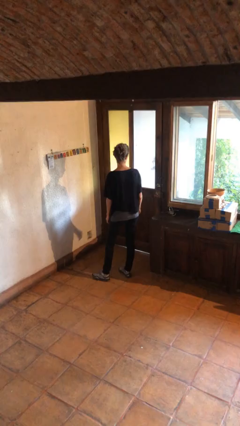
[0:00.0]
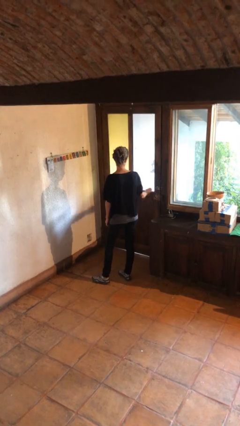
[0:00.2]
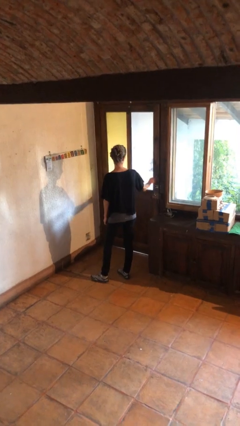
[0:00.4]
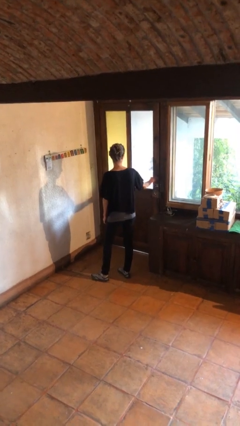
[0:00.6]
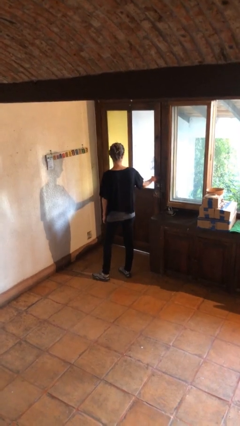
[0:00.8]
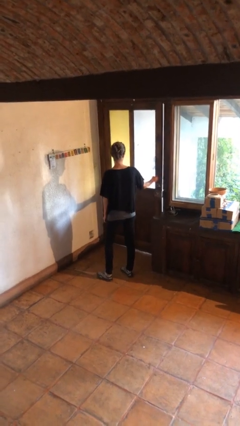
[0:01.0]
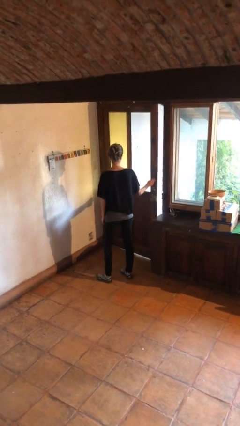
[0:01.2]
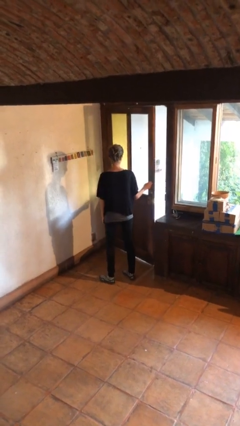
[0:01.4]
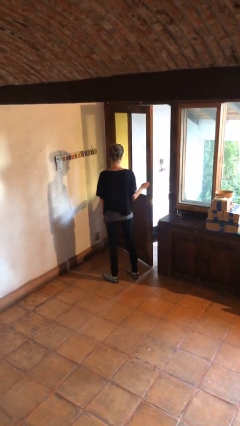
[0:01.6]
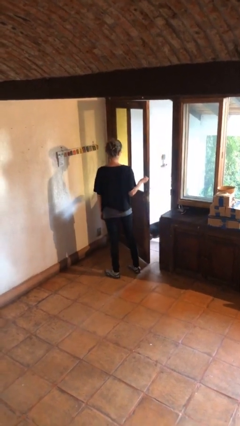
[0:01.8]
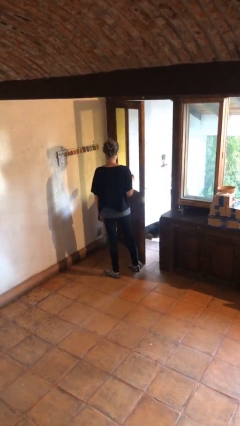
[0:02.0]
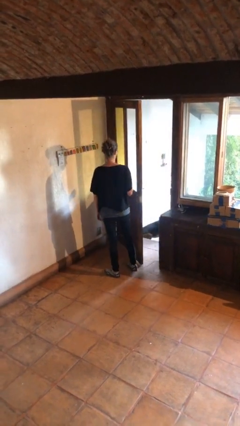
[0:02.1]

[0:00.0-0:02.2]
person opens facility door

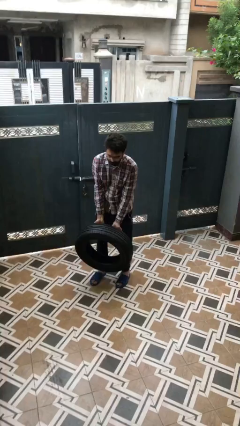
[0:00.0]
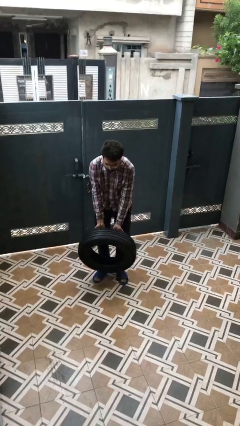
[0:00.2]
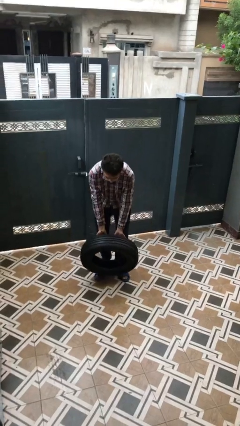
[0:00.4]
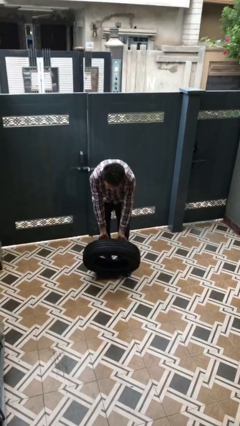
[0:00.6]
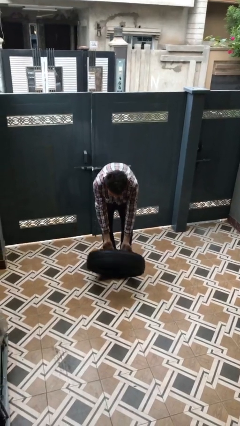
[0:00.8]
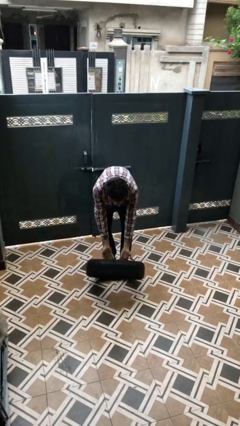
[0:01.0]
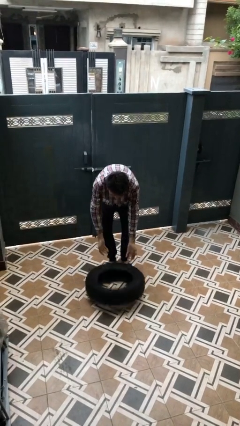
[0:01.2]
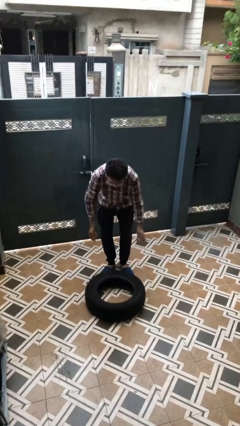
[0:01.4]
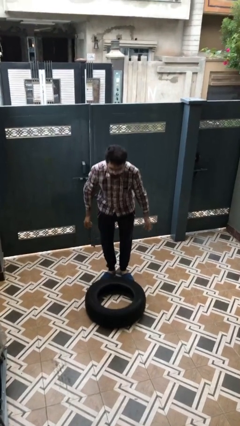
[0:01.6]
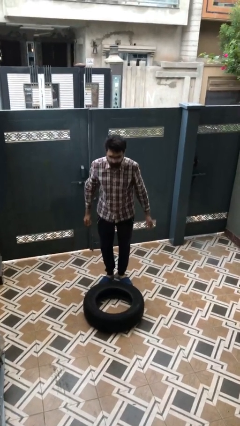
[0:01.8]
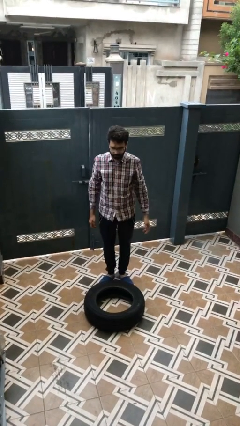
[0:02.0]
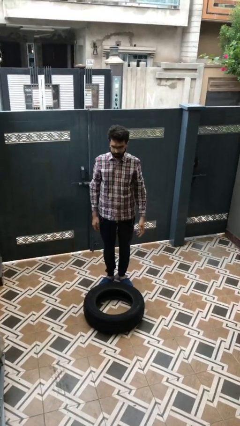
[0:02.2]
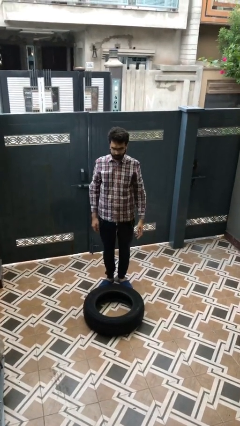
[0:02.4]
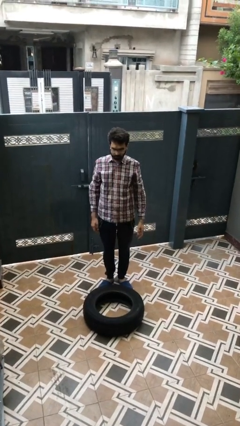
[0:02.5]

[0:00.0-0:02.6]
person puts down object on floor

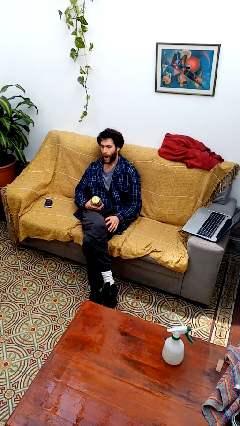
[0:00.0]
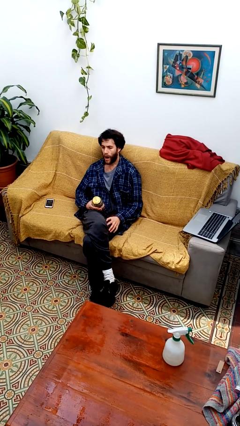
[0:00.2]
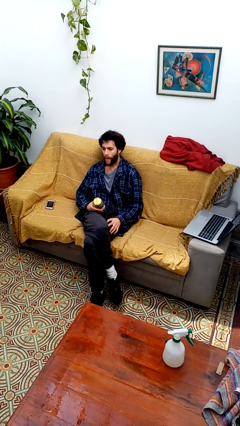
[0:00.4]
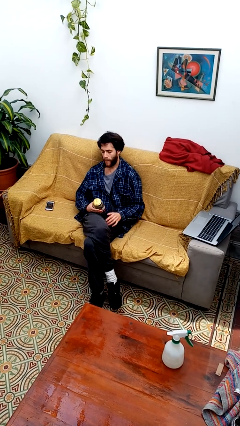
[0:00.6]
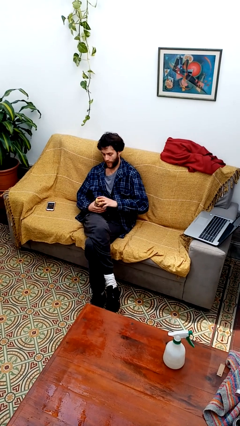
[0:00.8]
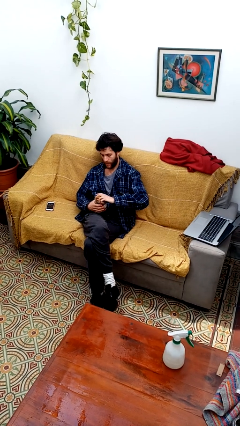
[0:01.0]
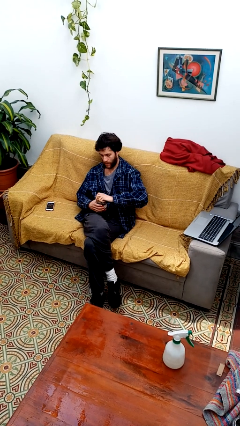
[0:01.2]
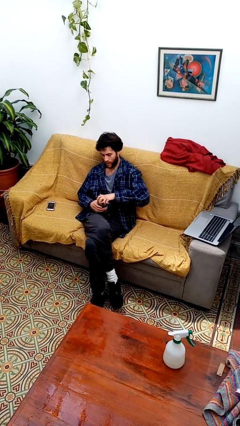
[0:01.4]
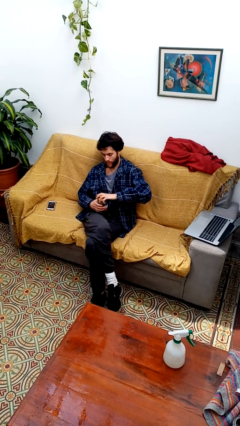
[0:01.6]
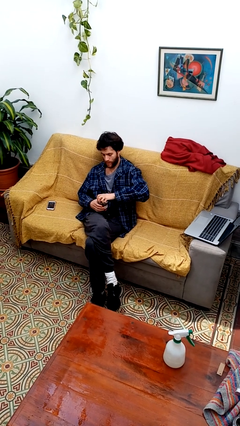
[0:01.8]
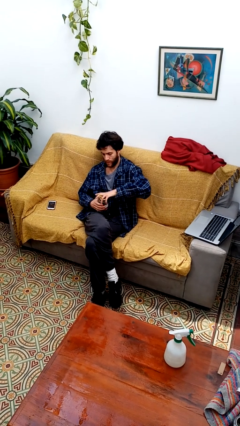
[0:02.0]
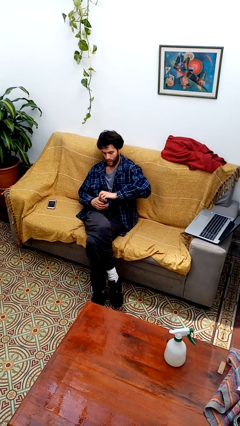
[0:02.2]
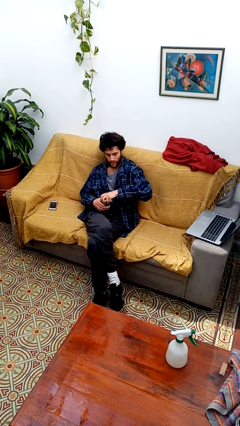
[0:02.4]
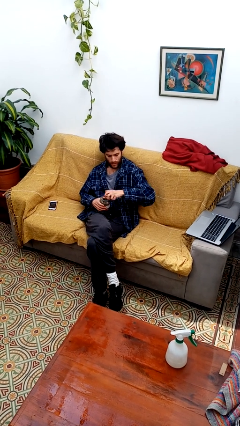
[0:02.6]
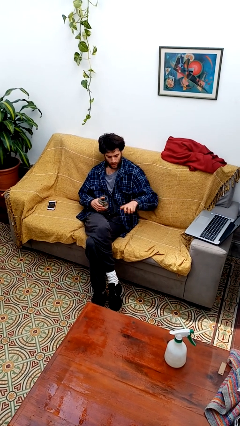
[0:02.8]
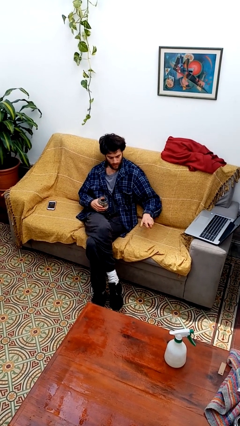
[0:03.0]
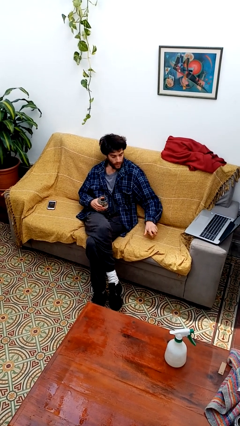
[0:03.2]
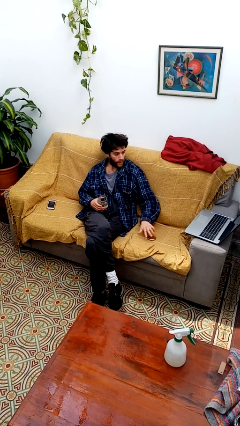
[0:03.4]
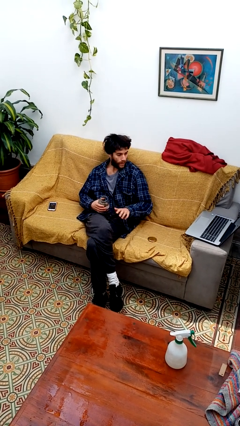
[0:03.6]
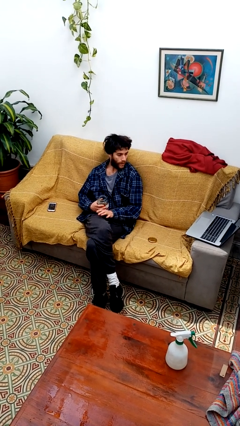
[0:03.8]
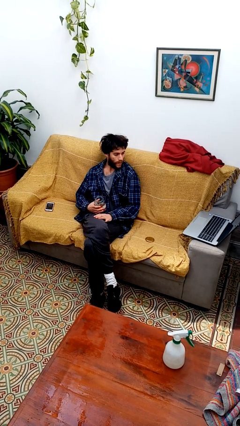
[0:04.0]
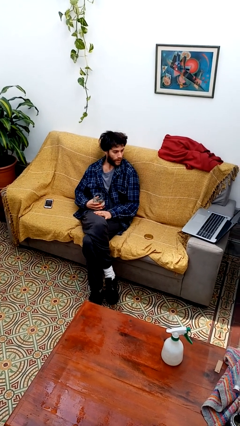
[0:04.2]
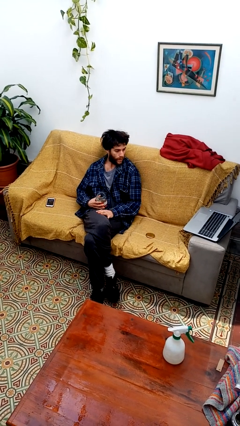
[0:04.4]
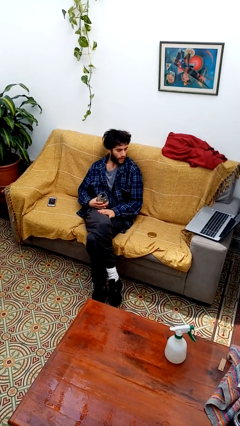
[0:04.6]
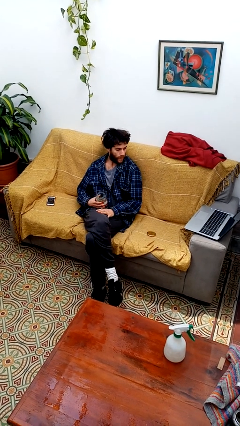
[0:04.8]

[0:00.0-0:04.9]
person opens jar

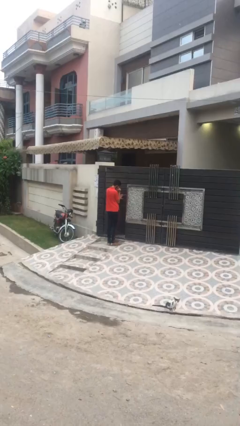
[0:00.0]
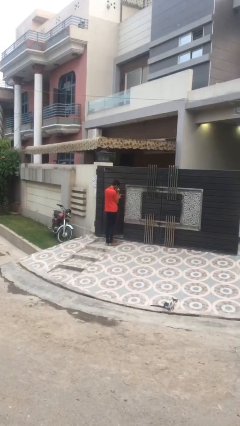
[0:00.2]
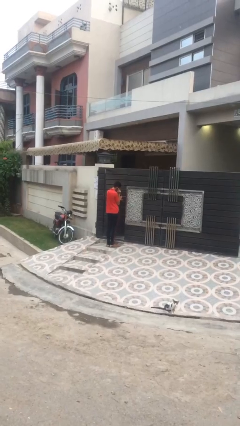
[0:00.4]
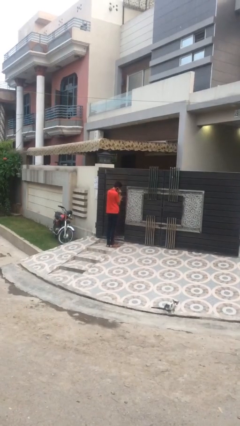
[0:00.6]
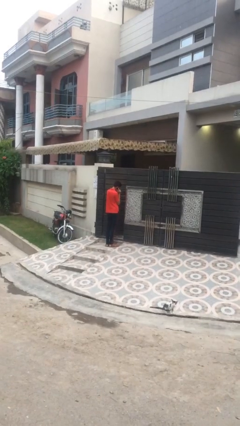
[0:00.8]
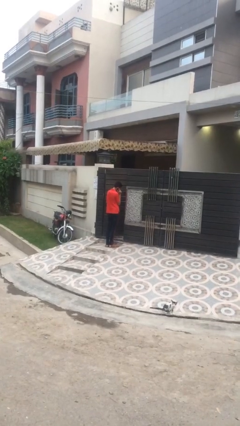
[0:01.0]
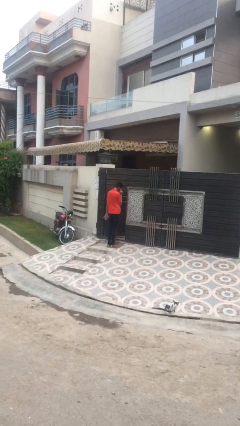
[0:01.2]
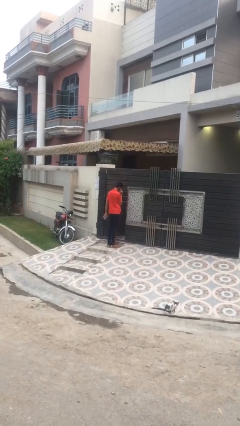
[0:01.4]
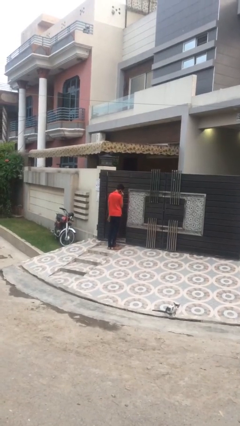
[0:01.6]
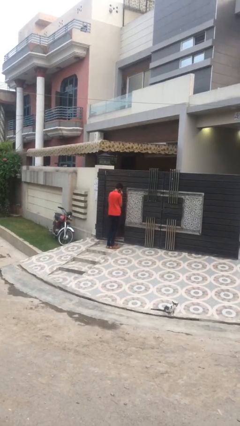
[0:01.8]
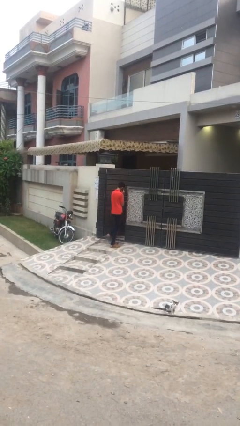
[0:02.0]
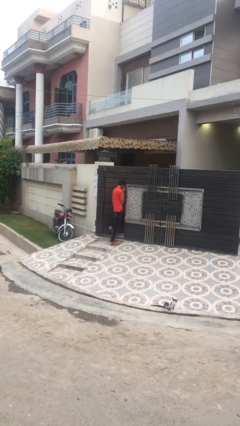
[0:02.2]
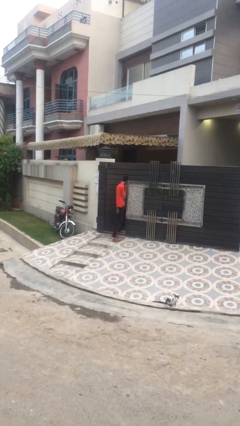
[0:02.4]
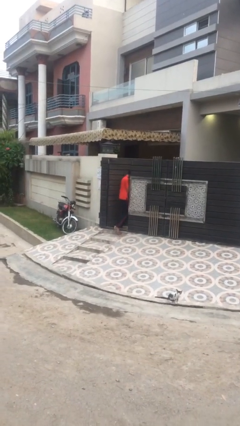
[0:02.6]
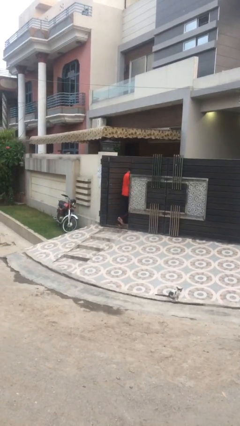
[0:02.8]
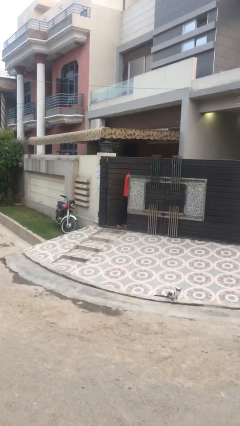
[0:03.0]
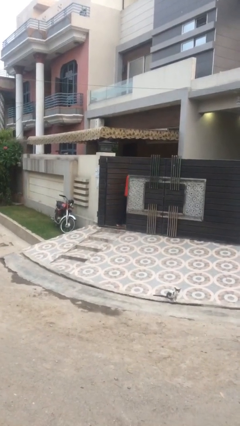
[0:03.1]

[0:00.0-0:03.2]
person exits scene through structure

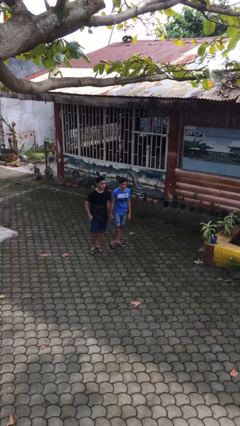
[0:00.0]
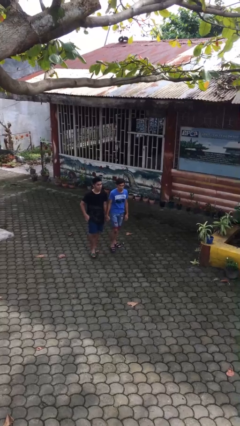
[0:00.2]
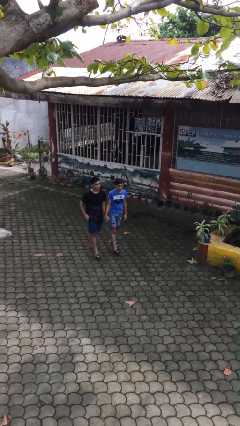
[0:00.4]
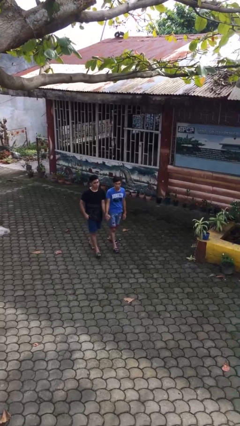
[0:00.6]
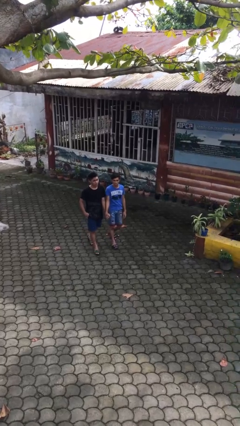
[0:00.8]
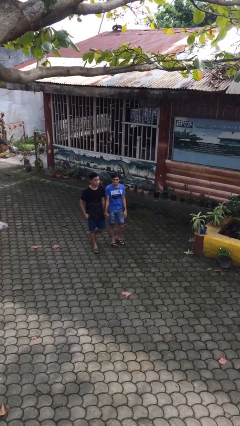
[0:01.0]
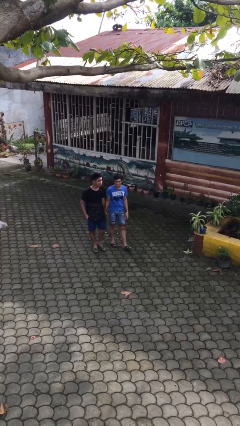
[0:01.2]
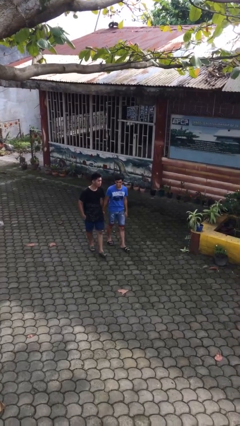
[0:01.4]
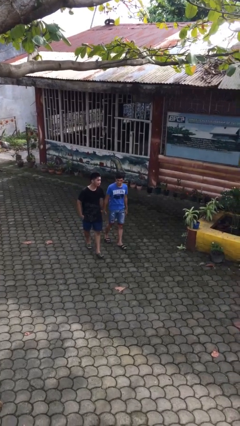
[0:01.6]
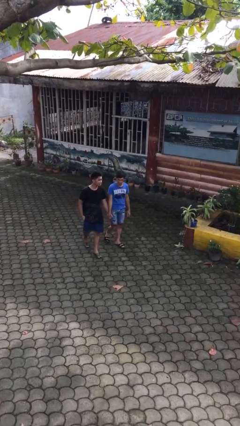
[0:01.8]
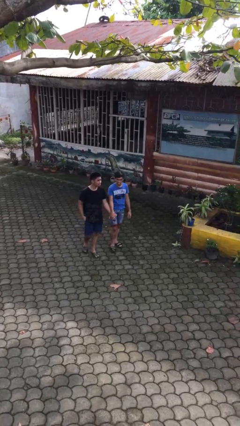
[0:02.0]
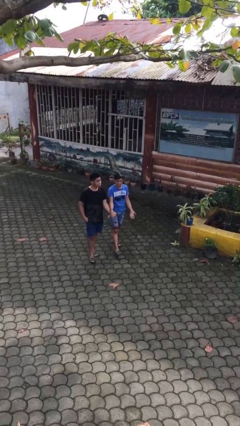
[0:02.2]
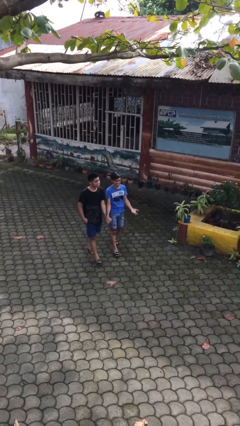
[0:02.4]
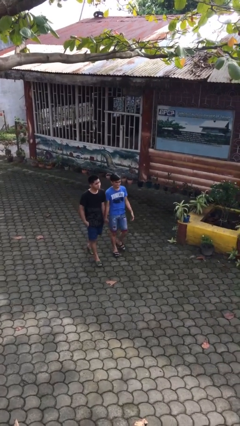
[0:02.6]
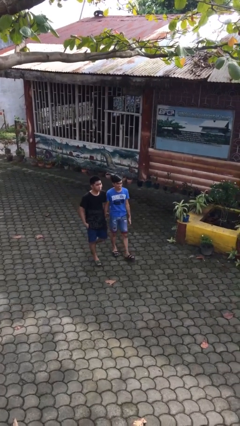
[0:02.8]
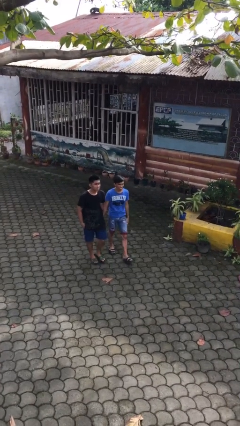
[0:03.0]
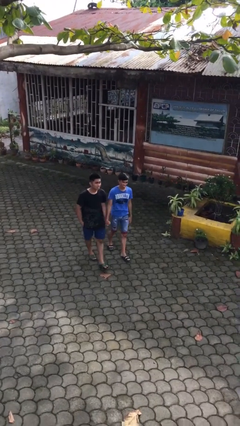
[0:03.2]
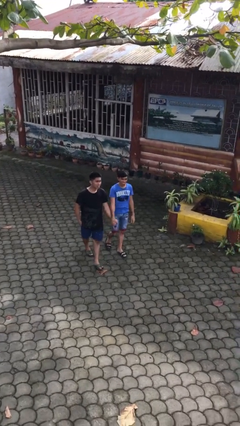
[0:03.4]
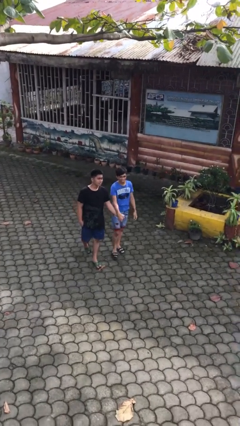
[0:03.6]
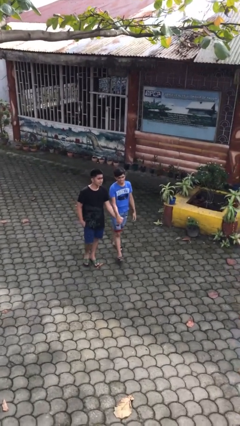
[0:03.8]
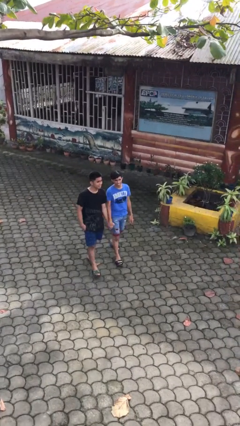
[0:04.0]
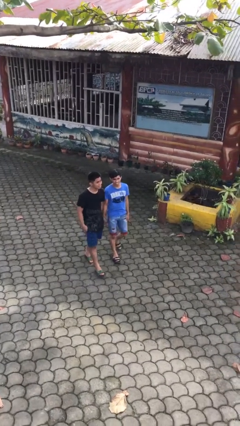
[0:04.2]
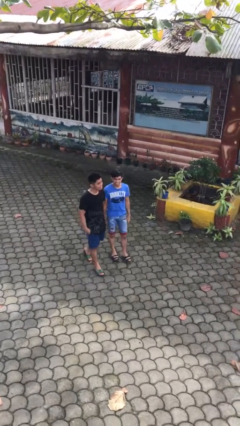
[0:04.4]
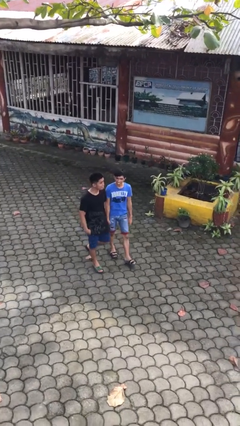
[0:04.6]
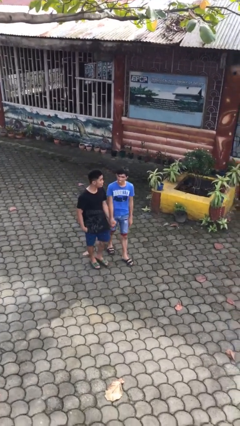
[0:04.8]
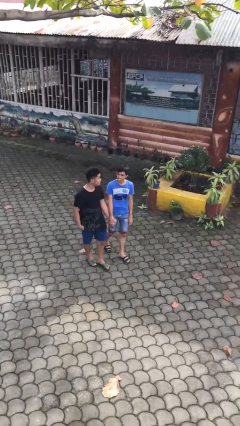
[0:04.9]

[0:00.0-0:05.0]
person holds hand
